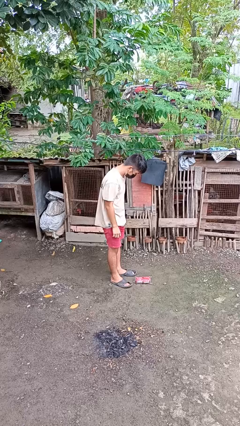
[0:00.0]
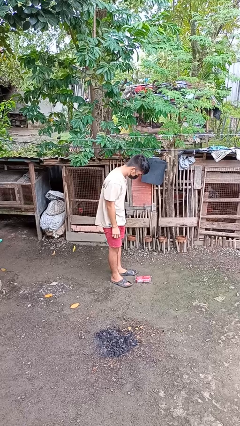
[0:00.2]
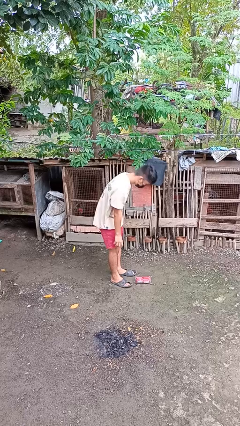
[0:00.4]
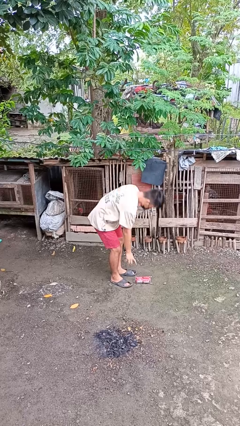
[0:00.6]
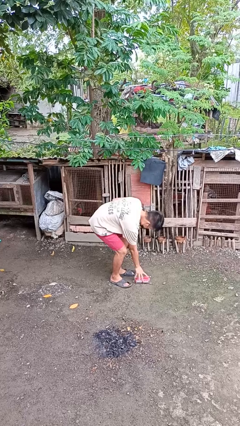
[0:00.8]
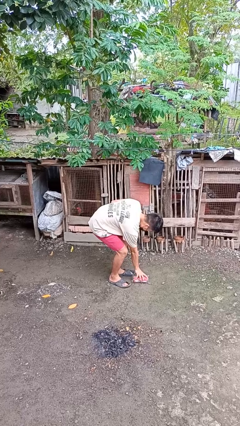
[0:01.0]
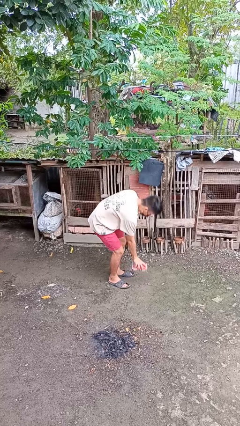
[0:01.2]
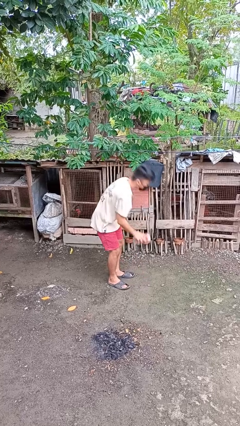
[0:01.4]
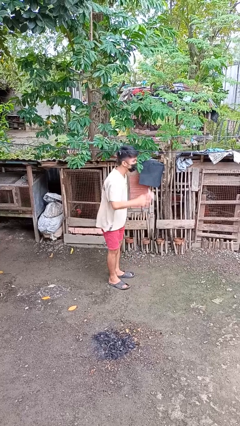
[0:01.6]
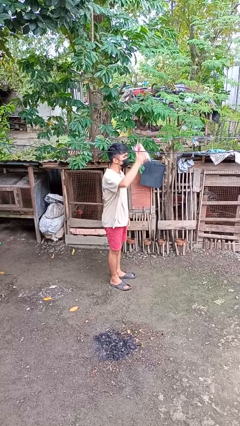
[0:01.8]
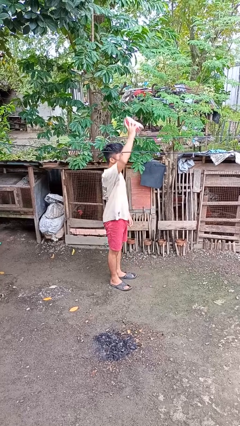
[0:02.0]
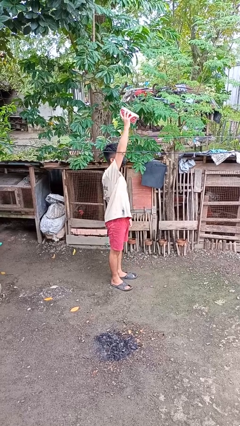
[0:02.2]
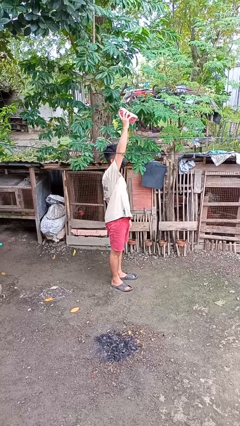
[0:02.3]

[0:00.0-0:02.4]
person picks up object from floor

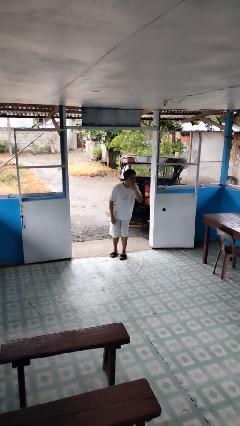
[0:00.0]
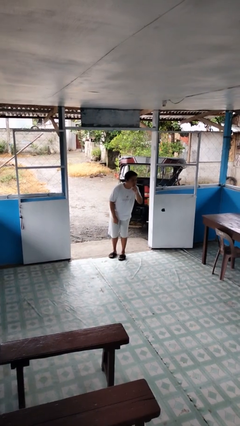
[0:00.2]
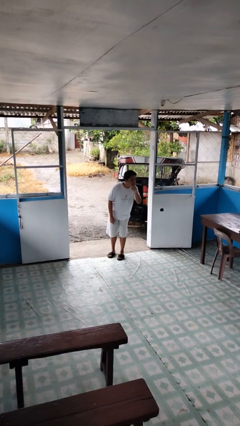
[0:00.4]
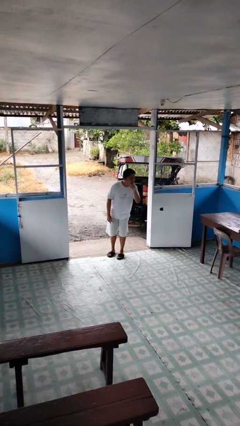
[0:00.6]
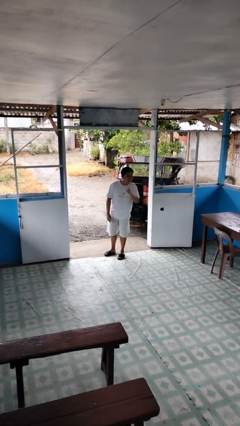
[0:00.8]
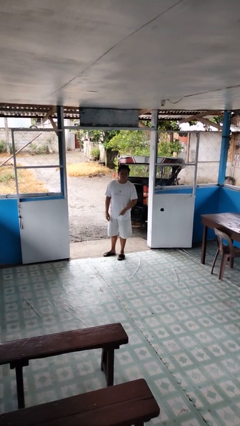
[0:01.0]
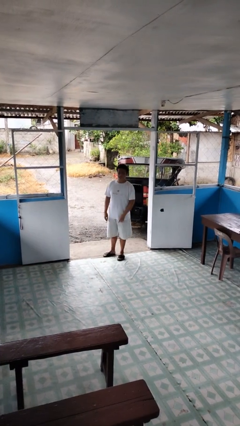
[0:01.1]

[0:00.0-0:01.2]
person gestures be quiet

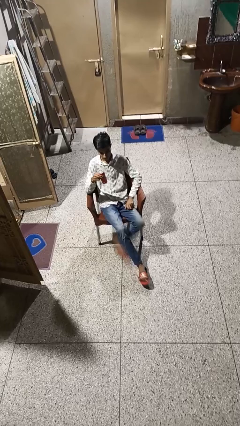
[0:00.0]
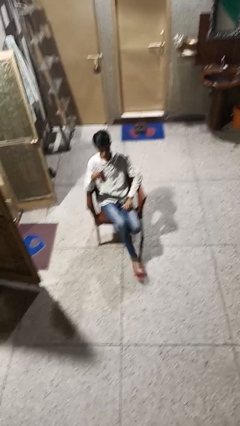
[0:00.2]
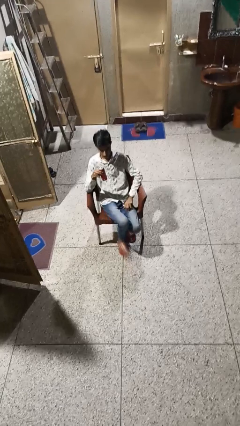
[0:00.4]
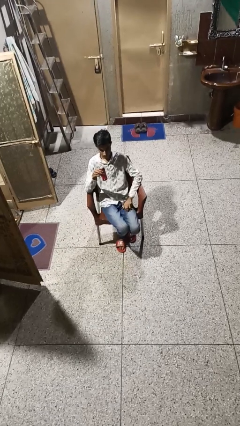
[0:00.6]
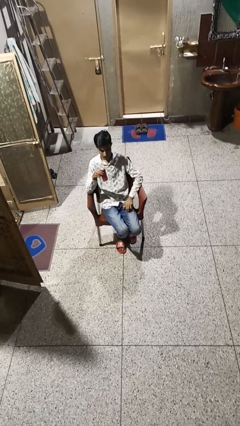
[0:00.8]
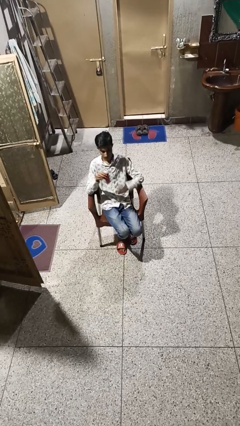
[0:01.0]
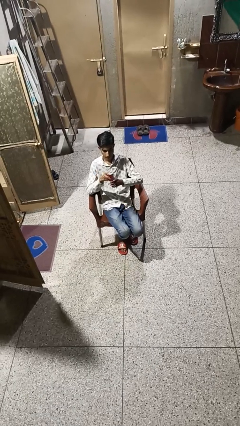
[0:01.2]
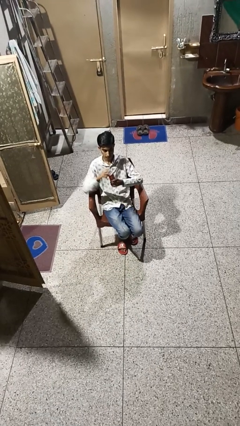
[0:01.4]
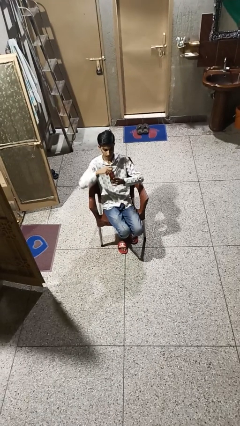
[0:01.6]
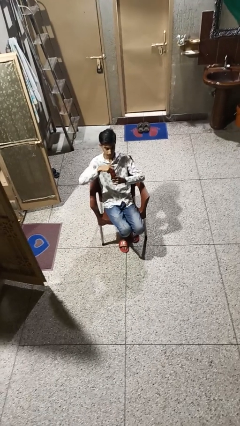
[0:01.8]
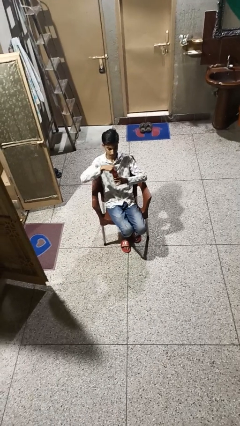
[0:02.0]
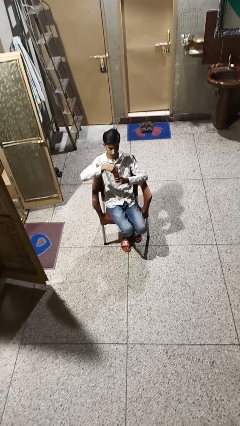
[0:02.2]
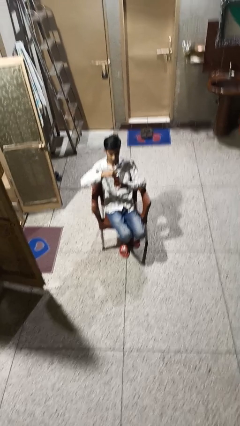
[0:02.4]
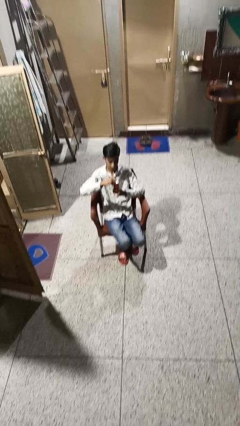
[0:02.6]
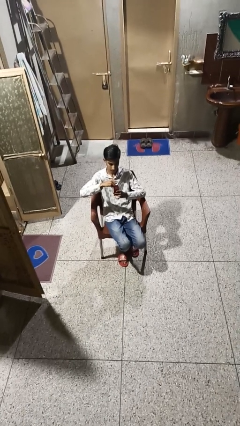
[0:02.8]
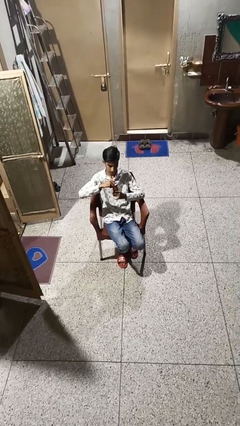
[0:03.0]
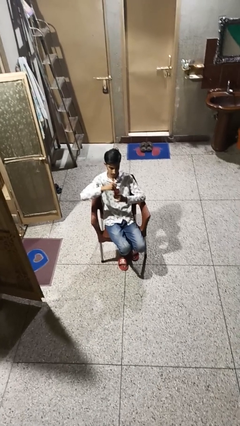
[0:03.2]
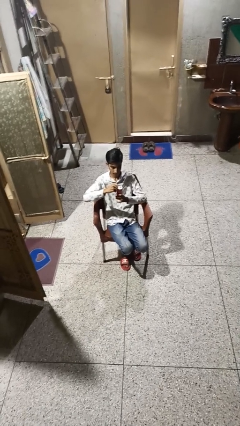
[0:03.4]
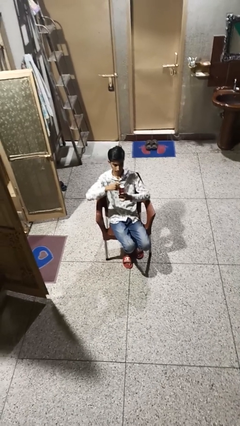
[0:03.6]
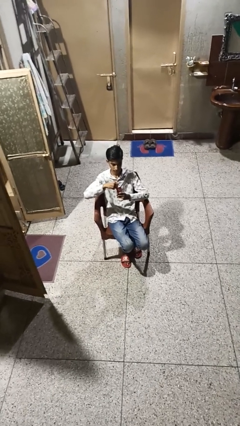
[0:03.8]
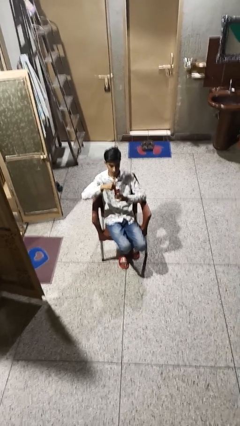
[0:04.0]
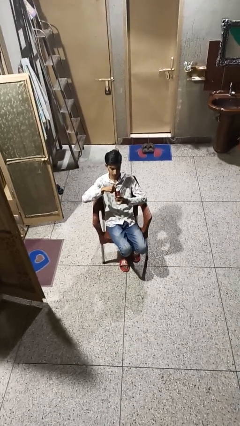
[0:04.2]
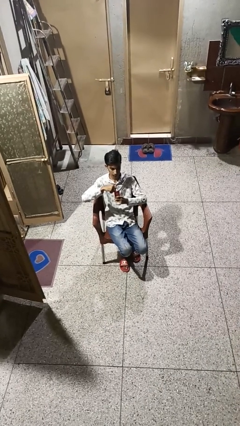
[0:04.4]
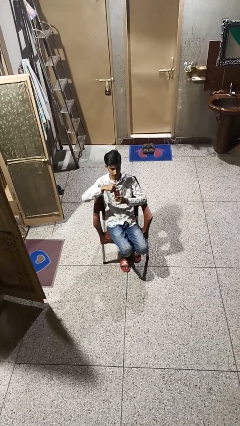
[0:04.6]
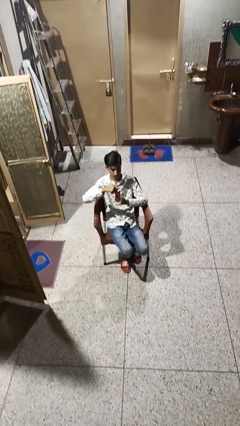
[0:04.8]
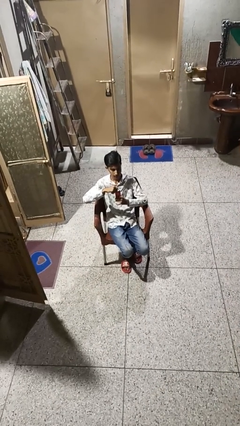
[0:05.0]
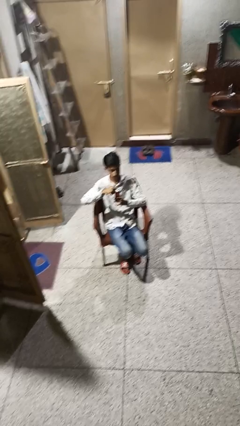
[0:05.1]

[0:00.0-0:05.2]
person opens beverage can

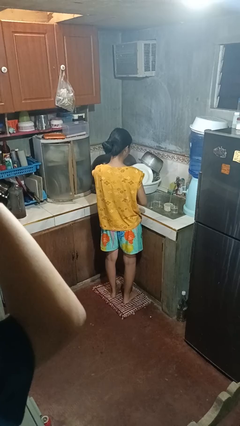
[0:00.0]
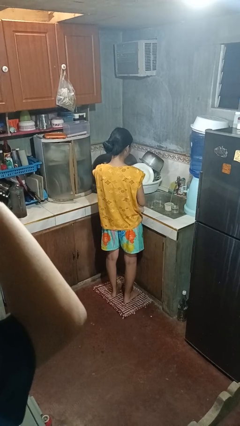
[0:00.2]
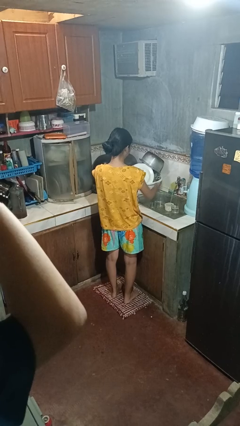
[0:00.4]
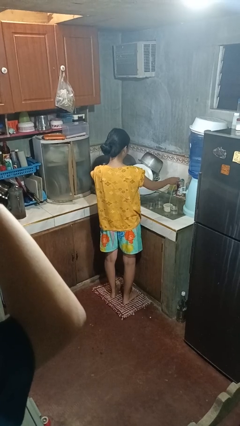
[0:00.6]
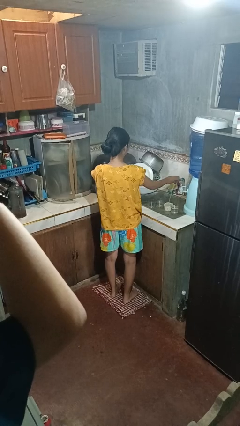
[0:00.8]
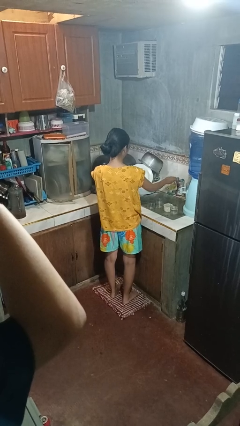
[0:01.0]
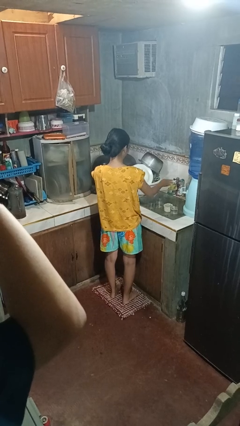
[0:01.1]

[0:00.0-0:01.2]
person turns off faucet

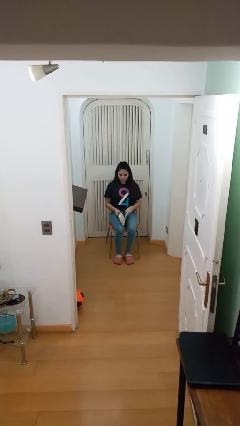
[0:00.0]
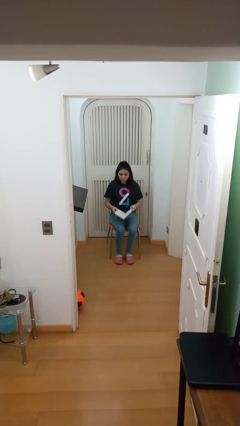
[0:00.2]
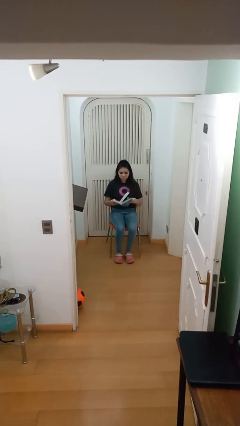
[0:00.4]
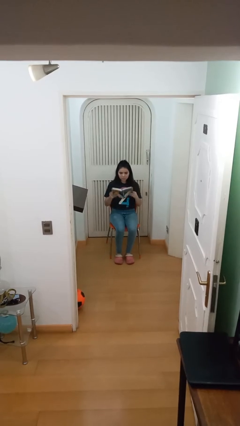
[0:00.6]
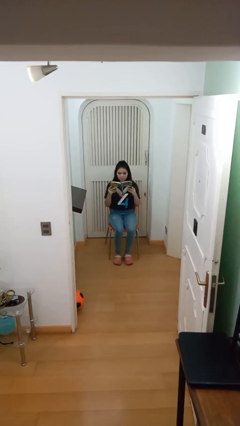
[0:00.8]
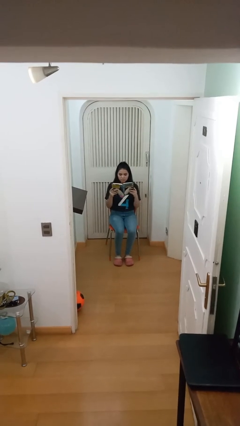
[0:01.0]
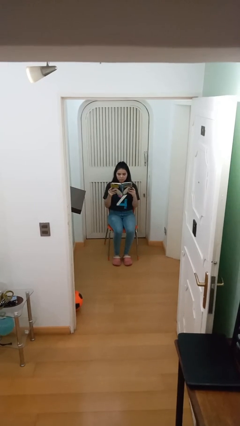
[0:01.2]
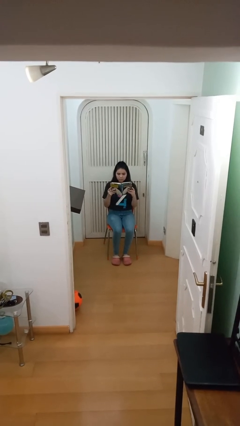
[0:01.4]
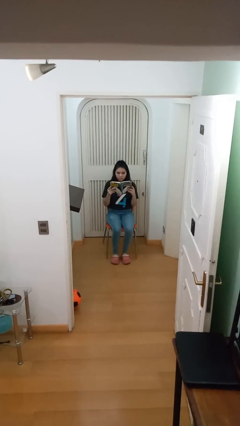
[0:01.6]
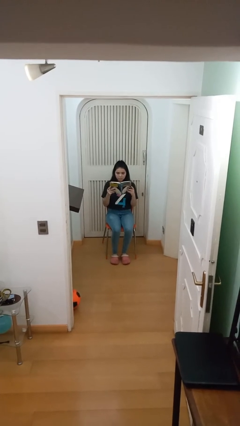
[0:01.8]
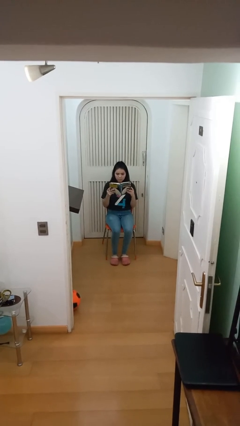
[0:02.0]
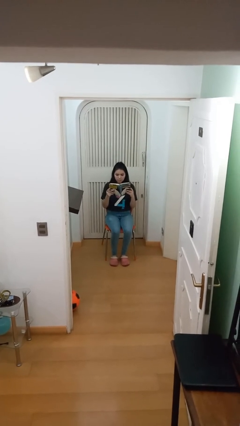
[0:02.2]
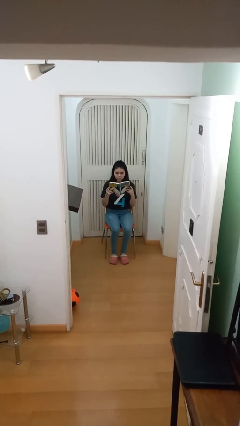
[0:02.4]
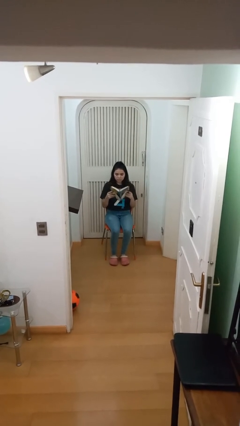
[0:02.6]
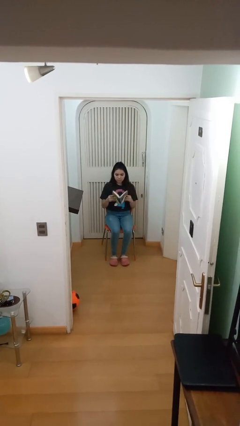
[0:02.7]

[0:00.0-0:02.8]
person reads document

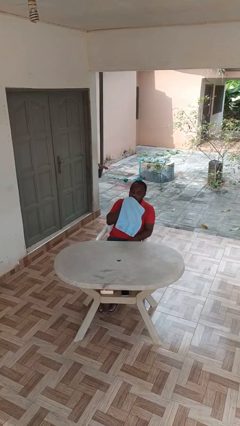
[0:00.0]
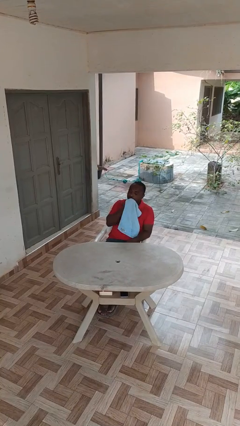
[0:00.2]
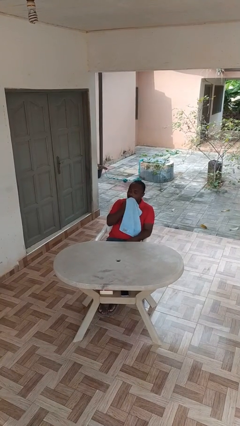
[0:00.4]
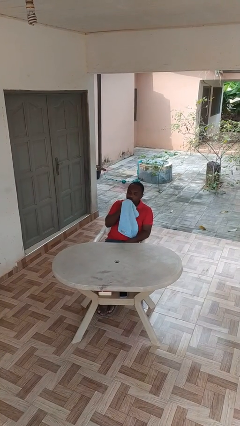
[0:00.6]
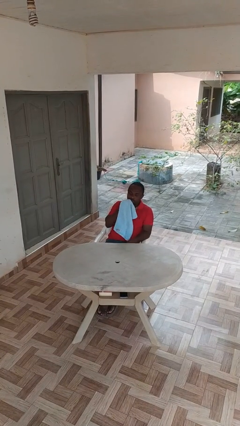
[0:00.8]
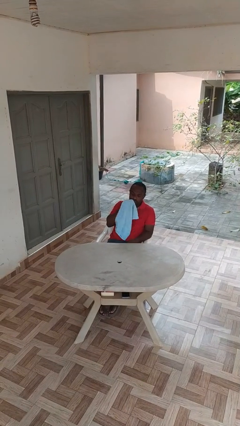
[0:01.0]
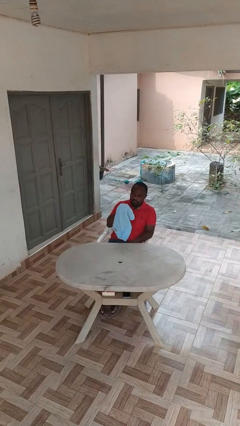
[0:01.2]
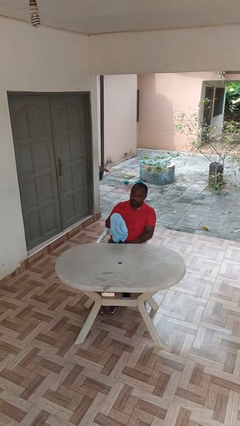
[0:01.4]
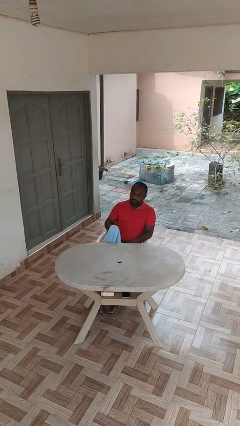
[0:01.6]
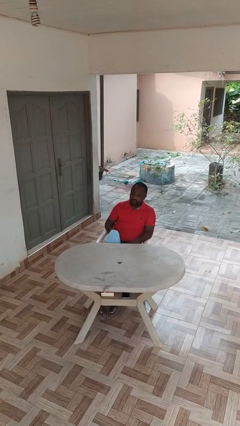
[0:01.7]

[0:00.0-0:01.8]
person wipes mouth with napkin

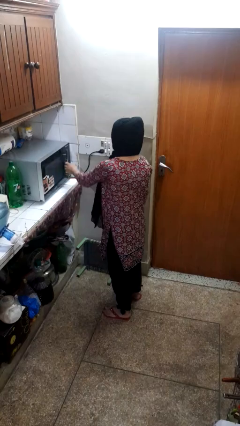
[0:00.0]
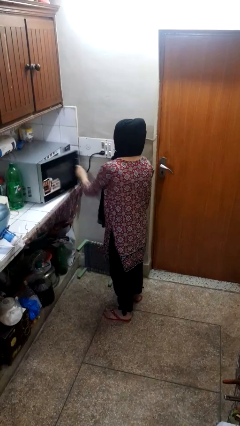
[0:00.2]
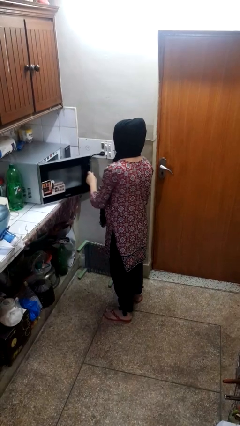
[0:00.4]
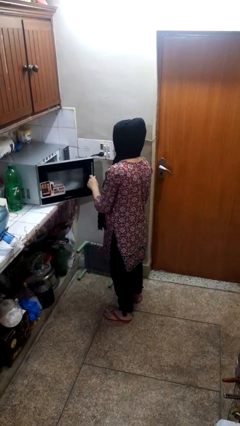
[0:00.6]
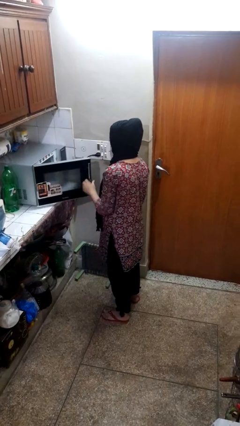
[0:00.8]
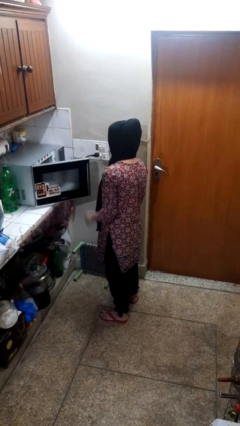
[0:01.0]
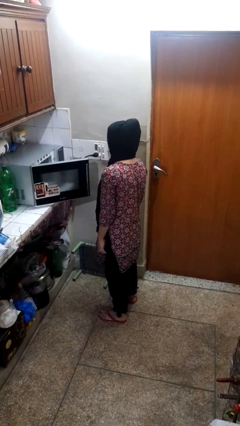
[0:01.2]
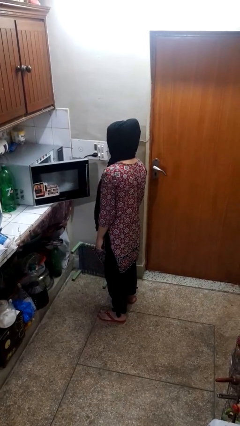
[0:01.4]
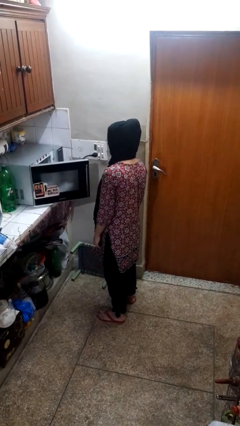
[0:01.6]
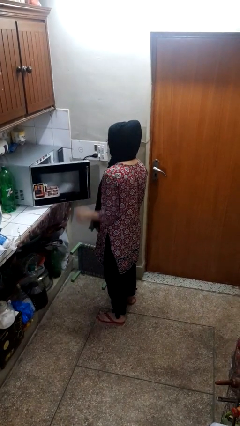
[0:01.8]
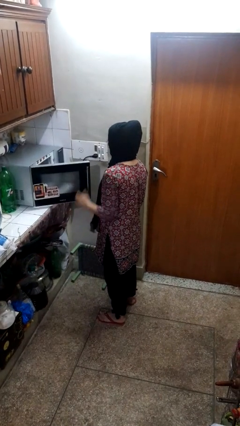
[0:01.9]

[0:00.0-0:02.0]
person opens oven door

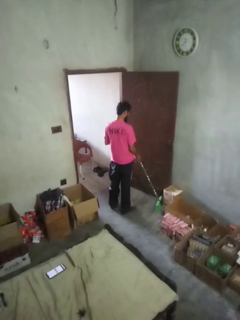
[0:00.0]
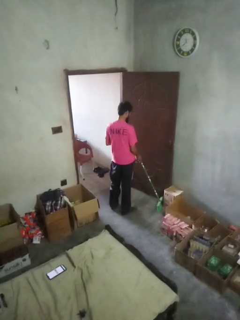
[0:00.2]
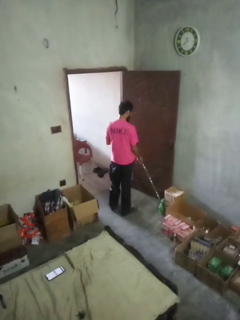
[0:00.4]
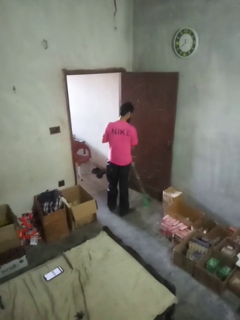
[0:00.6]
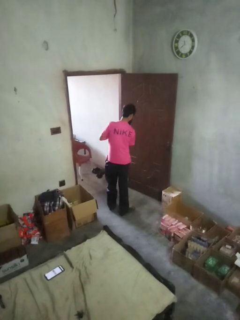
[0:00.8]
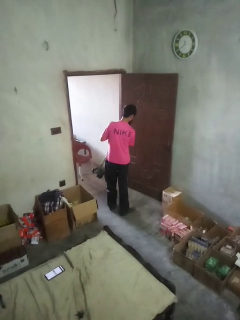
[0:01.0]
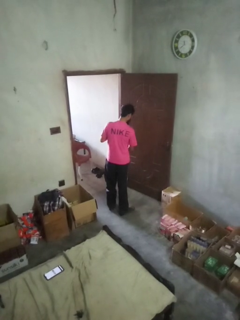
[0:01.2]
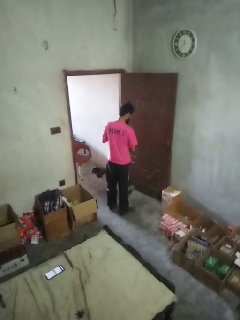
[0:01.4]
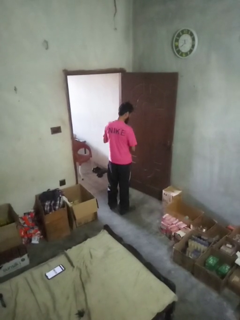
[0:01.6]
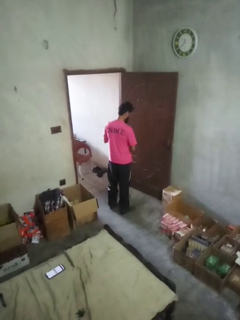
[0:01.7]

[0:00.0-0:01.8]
person sweeps floor
